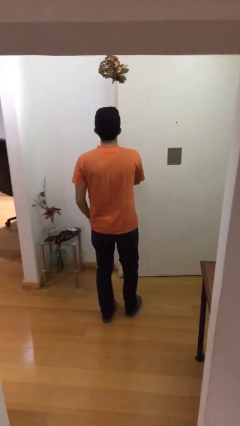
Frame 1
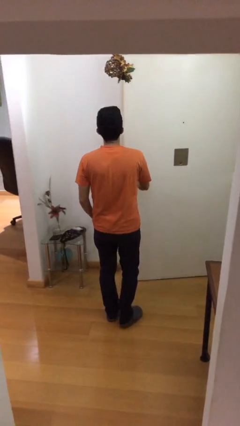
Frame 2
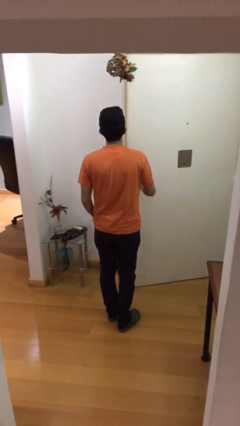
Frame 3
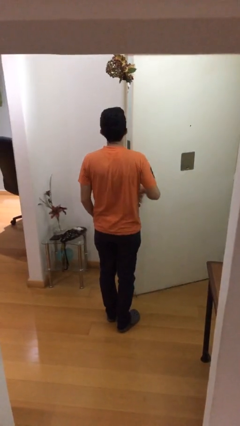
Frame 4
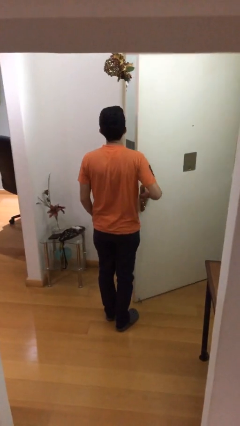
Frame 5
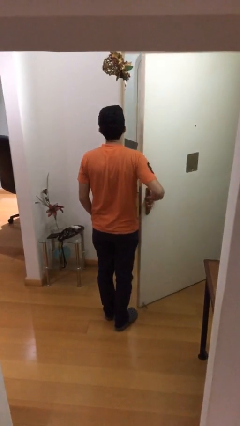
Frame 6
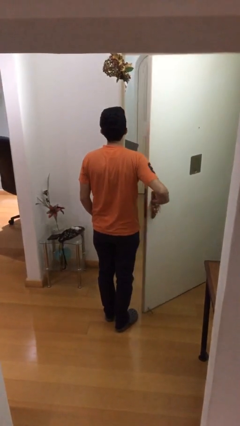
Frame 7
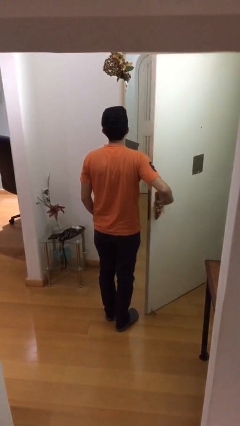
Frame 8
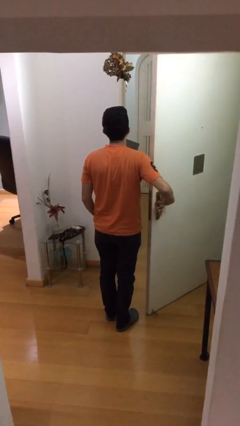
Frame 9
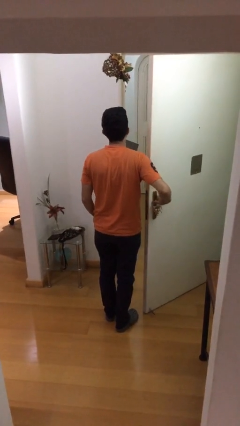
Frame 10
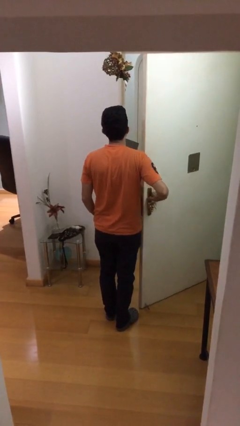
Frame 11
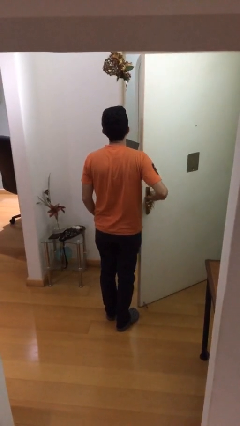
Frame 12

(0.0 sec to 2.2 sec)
person opens facility door

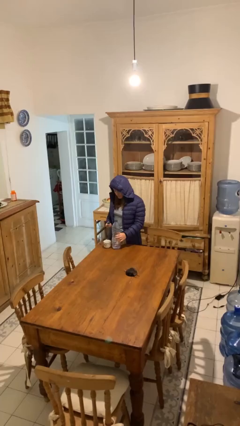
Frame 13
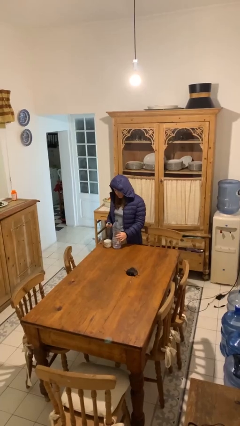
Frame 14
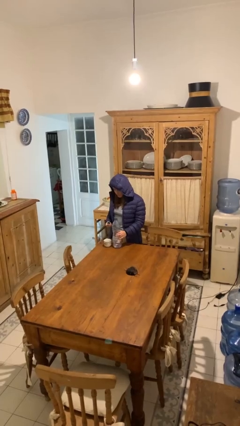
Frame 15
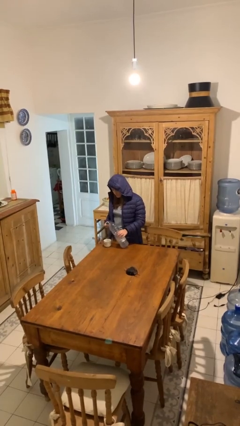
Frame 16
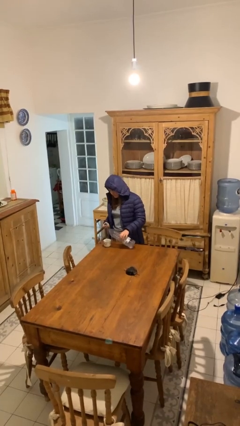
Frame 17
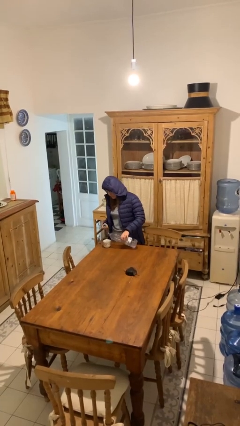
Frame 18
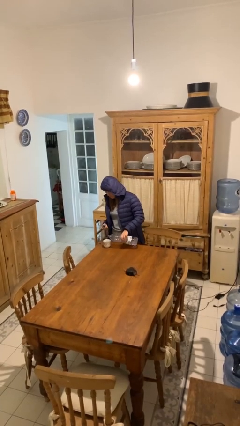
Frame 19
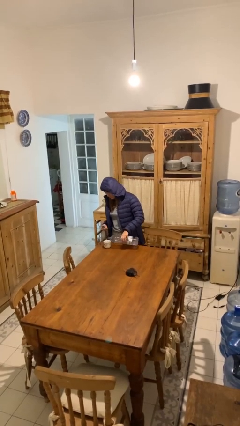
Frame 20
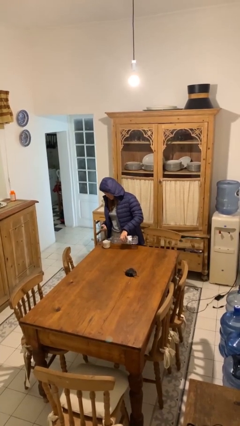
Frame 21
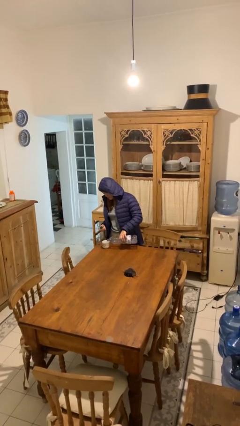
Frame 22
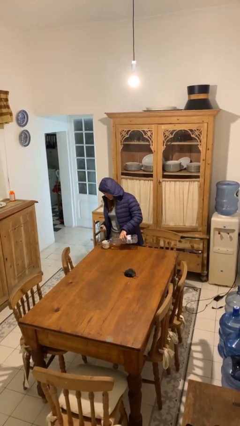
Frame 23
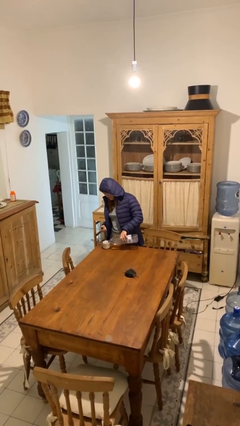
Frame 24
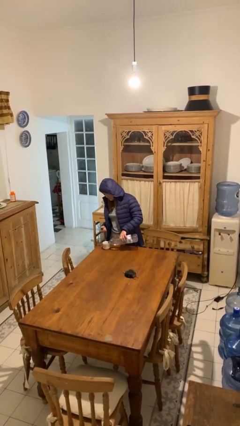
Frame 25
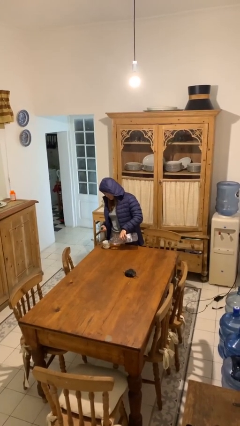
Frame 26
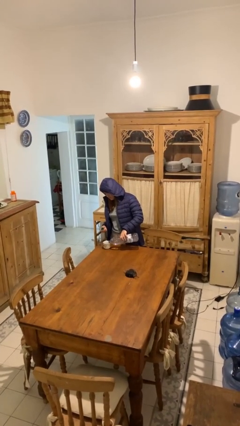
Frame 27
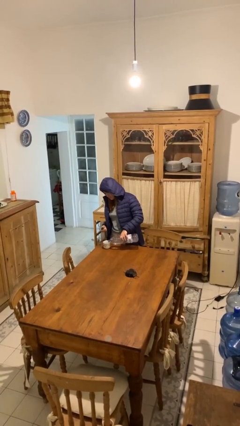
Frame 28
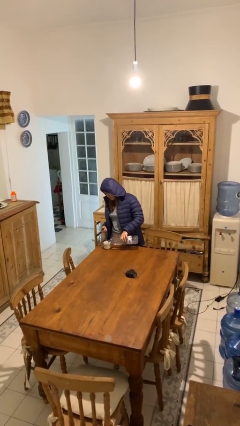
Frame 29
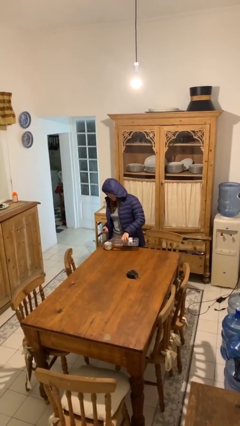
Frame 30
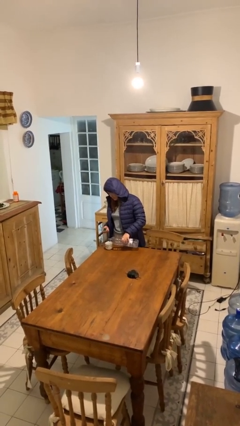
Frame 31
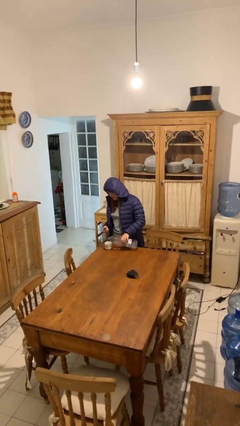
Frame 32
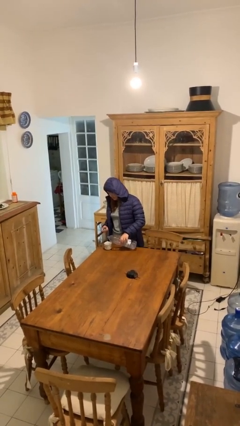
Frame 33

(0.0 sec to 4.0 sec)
person pours liquid into cup

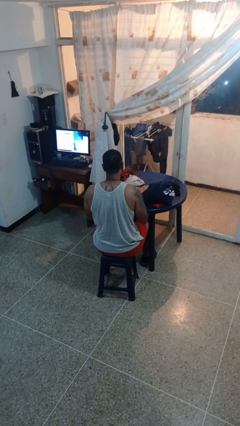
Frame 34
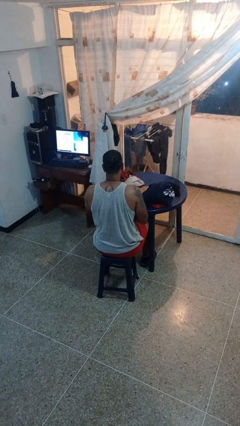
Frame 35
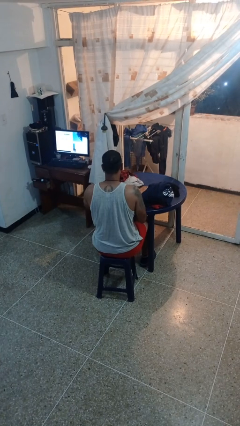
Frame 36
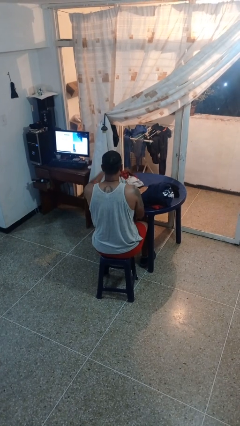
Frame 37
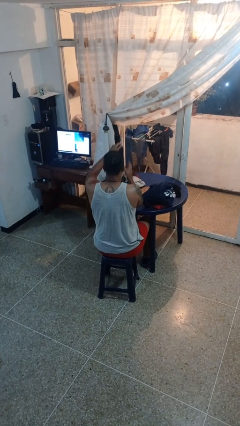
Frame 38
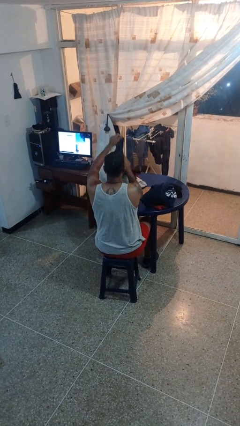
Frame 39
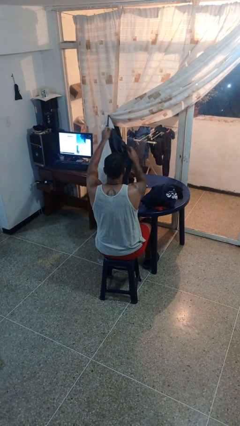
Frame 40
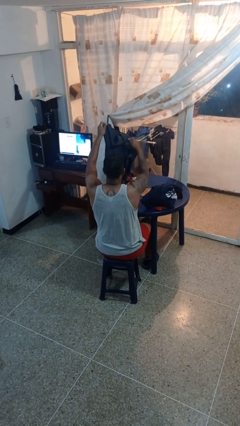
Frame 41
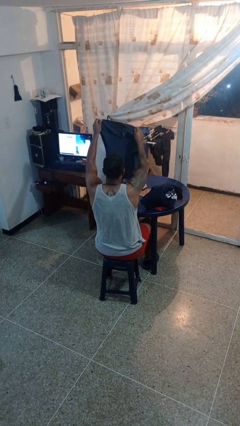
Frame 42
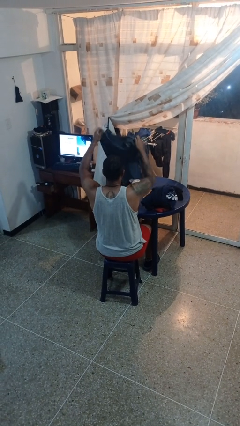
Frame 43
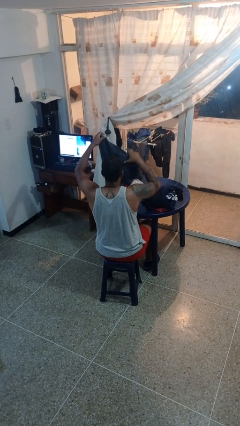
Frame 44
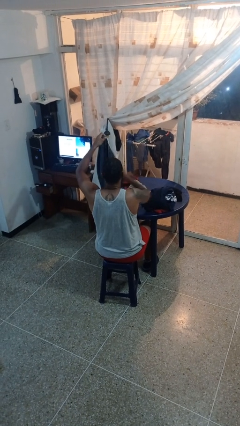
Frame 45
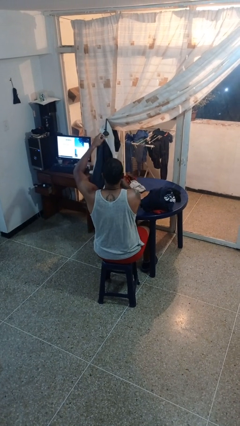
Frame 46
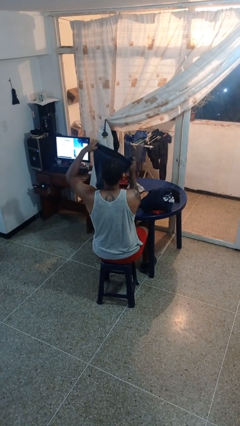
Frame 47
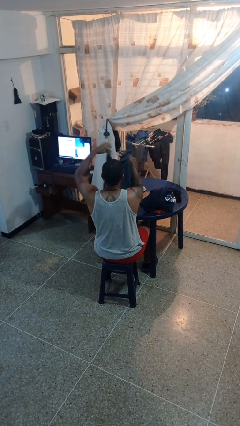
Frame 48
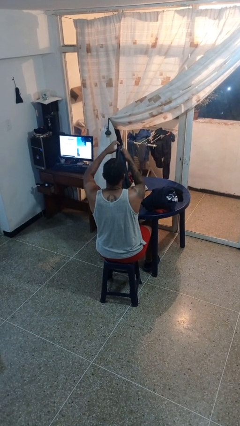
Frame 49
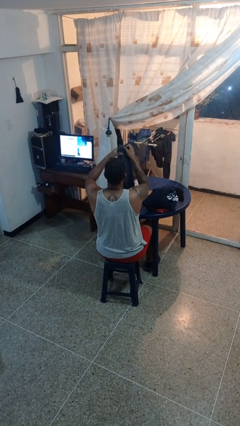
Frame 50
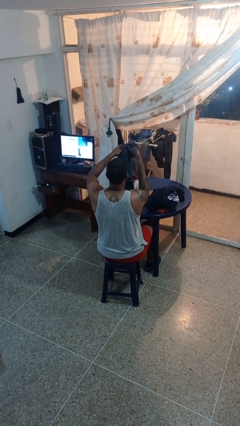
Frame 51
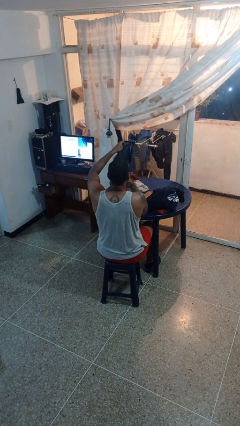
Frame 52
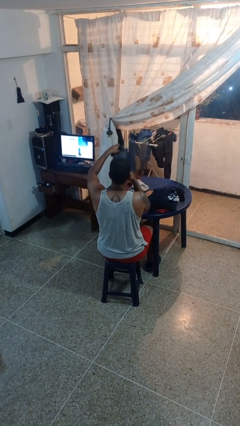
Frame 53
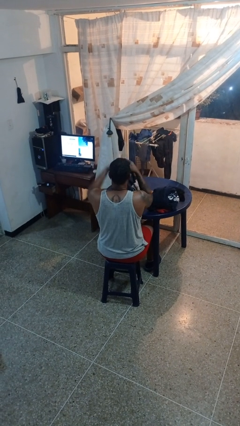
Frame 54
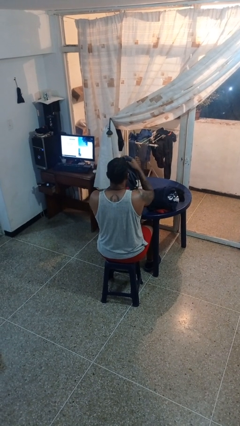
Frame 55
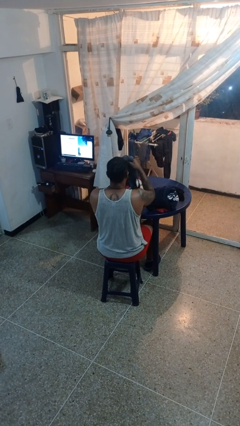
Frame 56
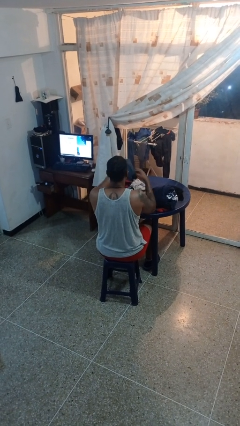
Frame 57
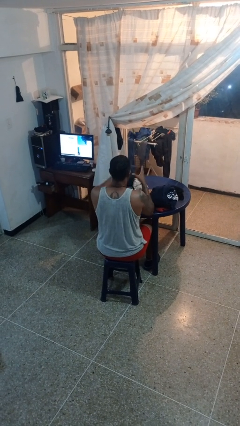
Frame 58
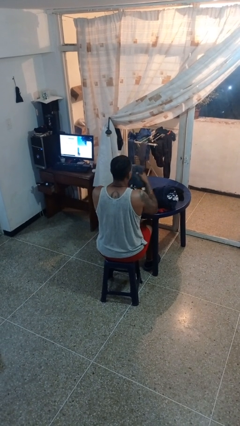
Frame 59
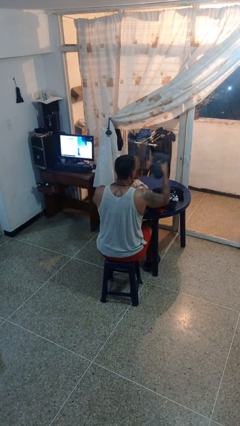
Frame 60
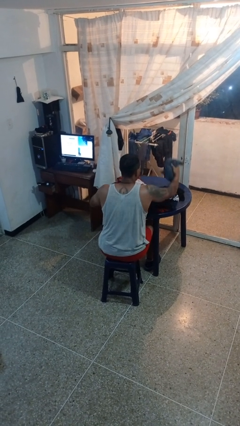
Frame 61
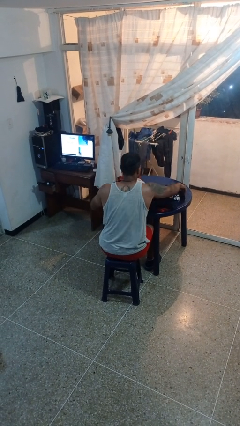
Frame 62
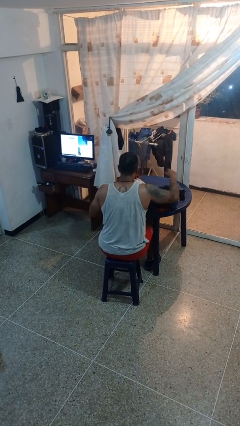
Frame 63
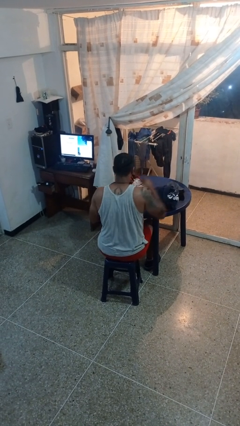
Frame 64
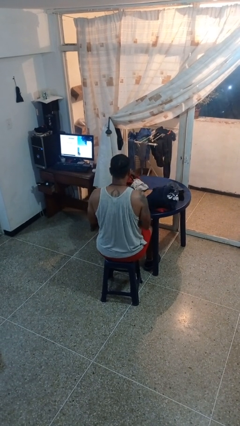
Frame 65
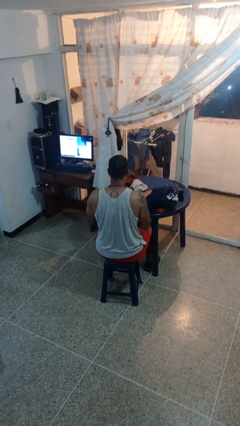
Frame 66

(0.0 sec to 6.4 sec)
person folds shirt

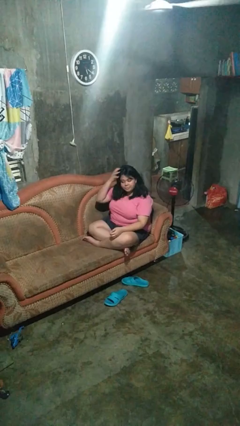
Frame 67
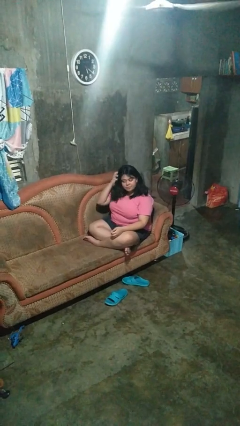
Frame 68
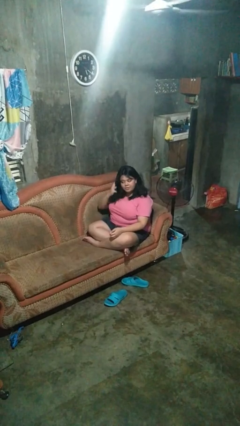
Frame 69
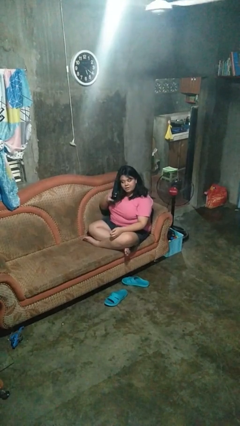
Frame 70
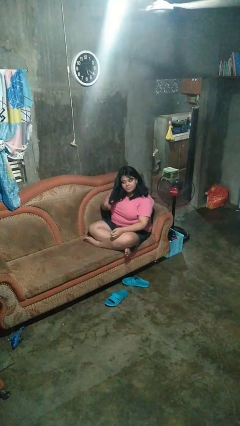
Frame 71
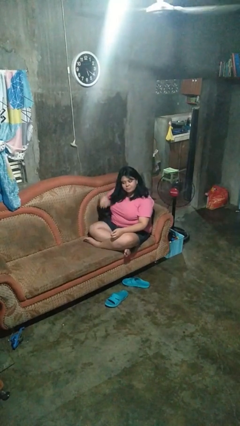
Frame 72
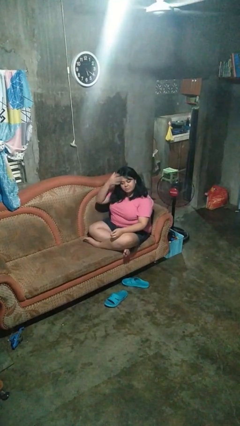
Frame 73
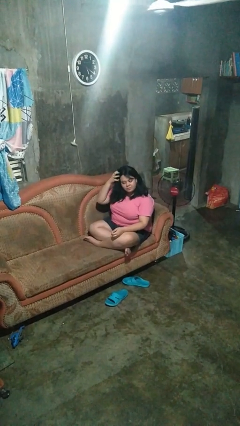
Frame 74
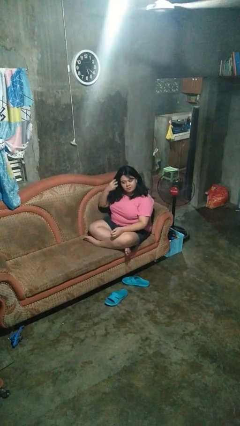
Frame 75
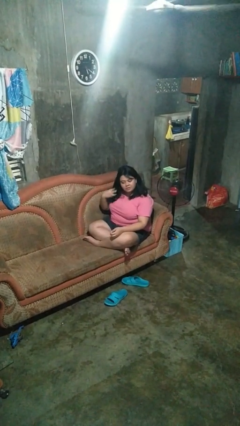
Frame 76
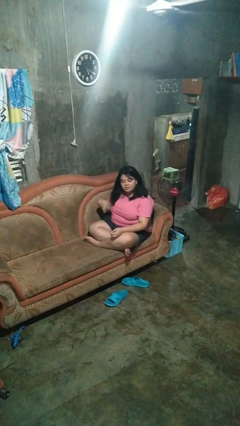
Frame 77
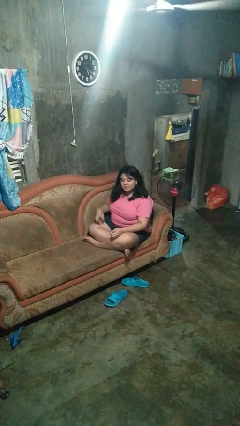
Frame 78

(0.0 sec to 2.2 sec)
person strokes hair

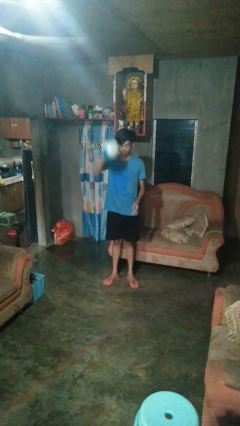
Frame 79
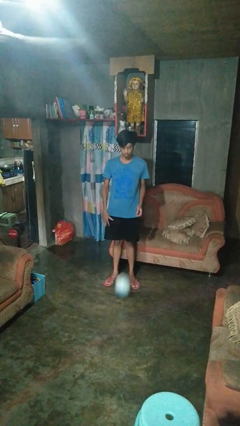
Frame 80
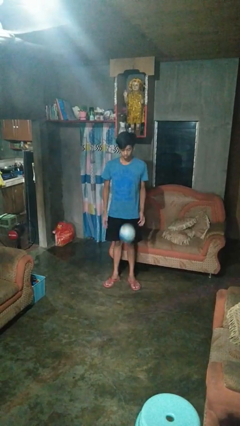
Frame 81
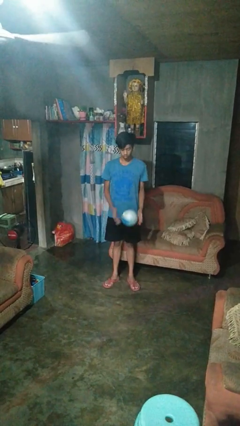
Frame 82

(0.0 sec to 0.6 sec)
person bounces ball on floor

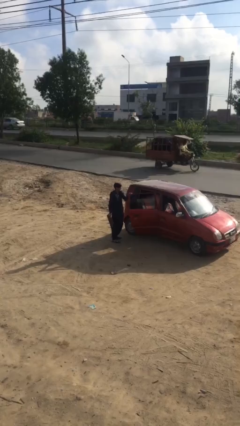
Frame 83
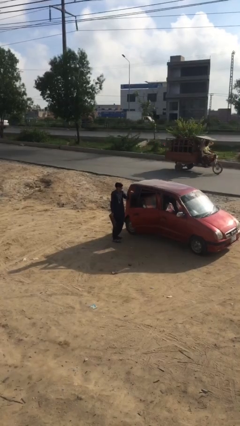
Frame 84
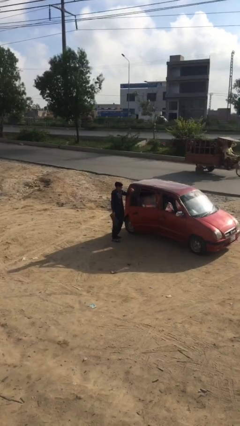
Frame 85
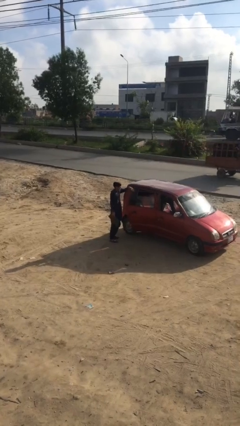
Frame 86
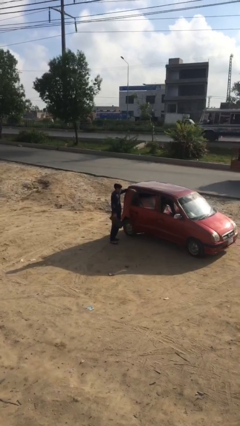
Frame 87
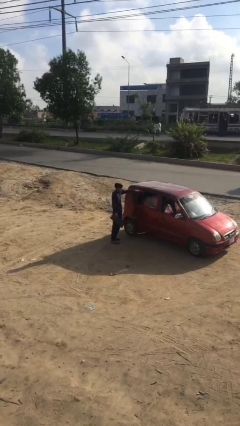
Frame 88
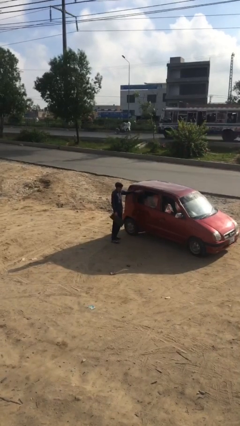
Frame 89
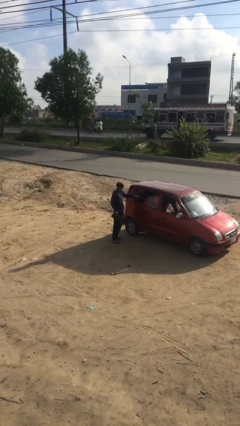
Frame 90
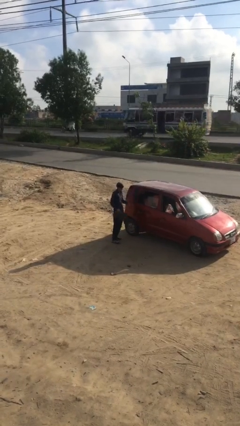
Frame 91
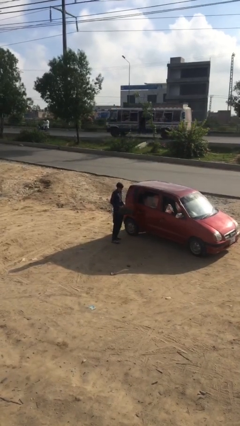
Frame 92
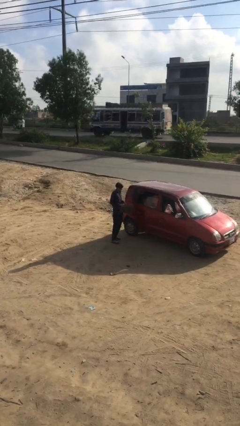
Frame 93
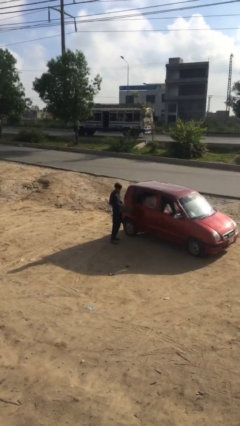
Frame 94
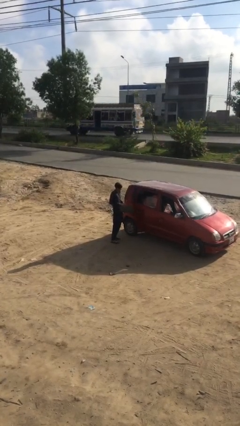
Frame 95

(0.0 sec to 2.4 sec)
person closes car door
